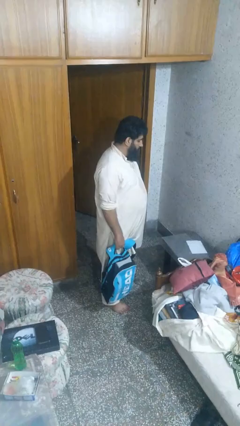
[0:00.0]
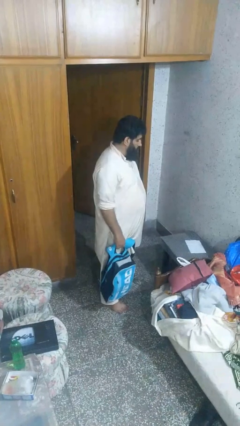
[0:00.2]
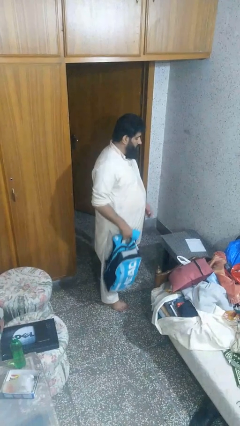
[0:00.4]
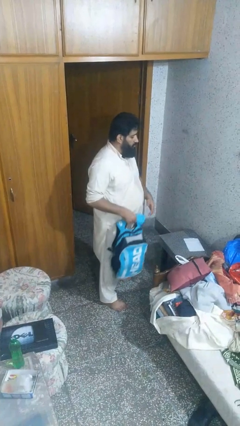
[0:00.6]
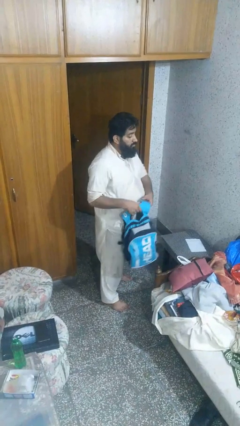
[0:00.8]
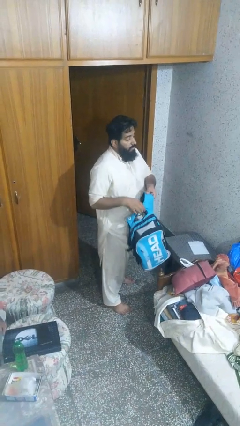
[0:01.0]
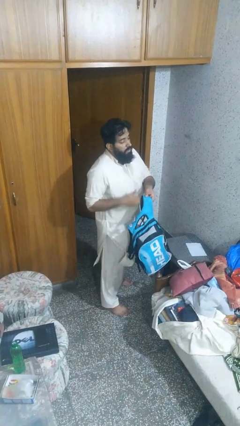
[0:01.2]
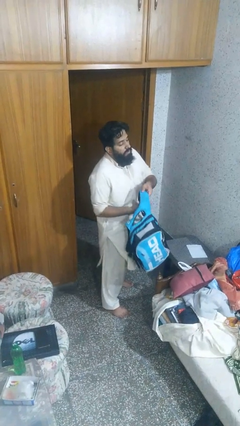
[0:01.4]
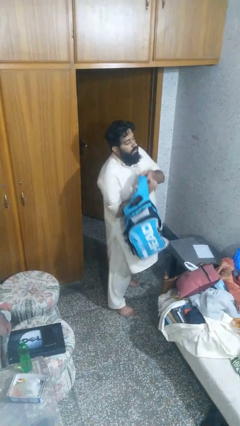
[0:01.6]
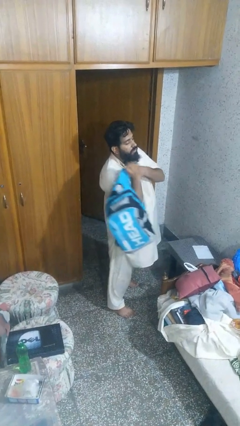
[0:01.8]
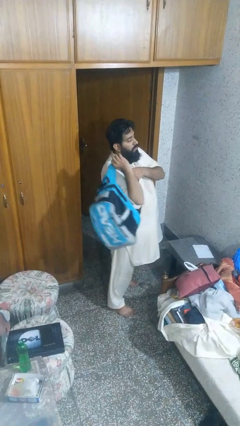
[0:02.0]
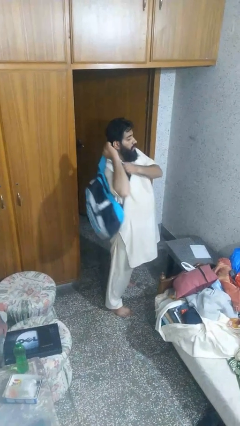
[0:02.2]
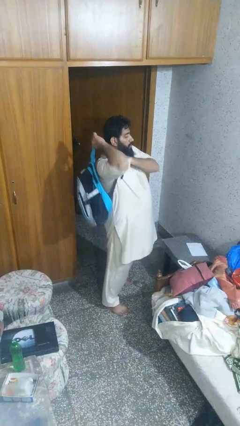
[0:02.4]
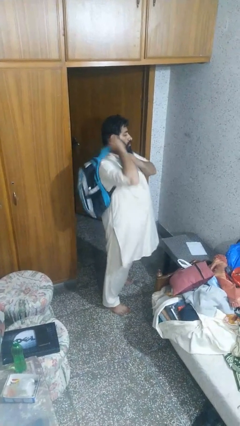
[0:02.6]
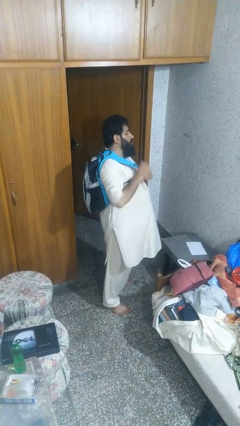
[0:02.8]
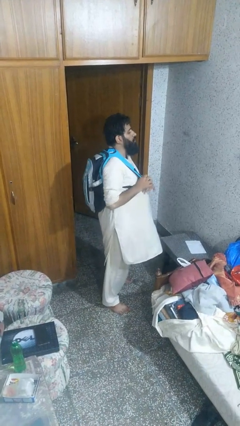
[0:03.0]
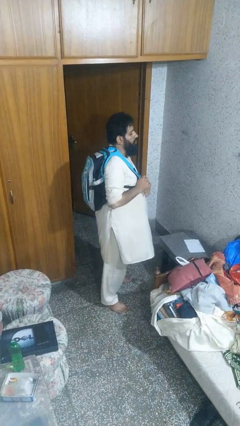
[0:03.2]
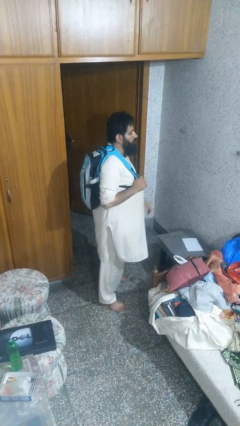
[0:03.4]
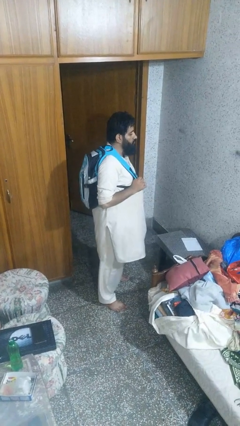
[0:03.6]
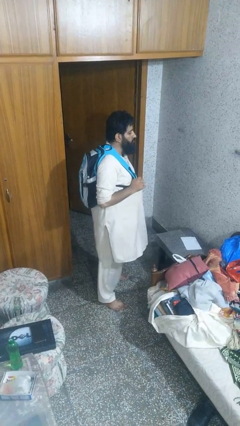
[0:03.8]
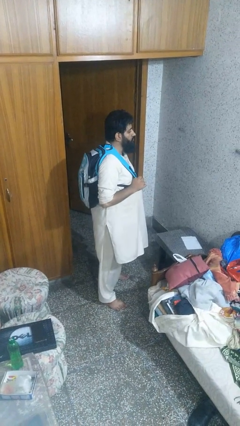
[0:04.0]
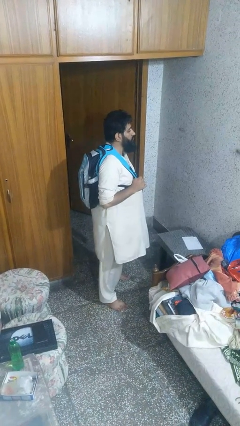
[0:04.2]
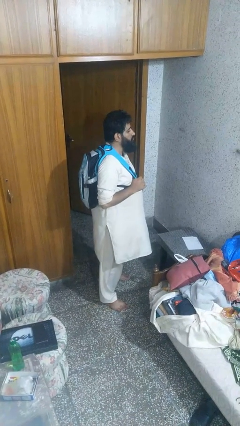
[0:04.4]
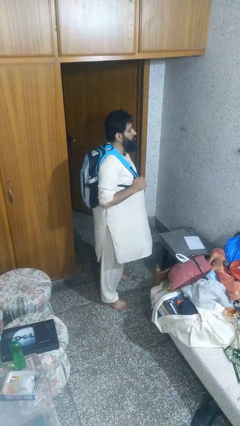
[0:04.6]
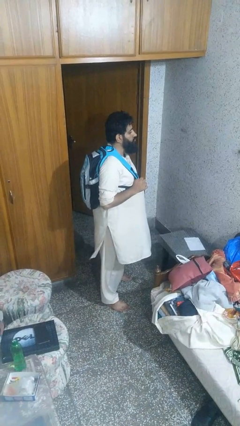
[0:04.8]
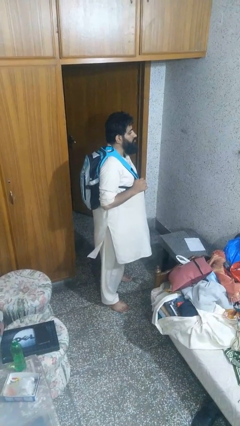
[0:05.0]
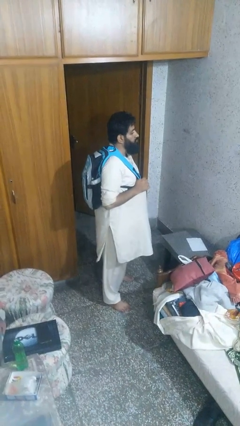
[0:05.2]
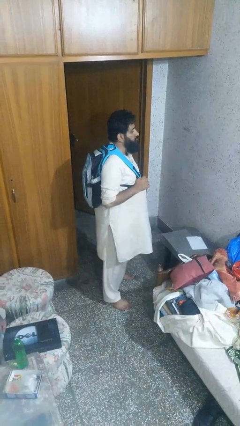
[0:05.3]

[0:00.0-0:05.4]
person puts on backpack

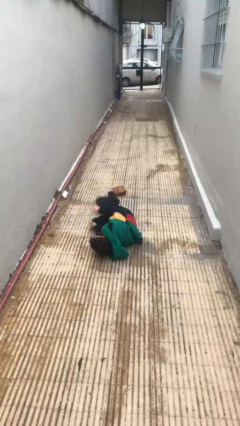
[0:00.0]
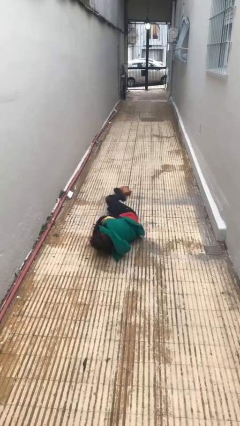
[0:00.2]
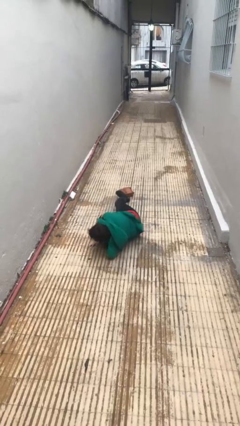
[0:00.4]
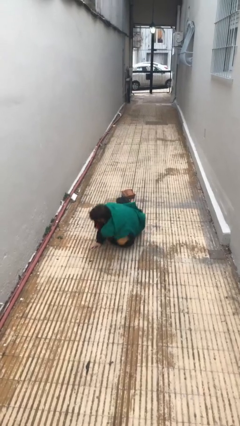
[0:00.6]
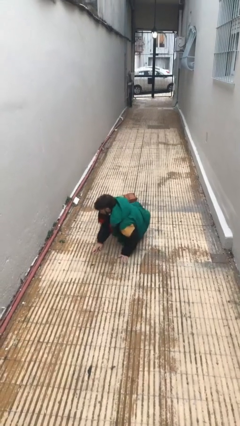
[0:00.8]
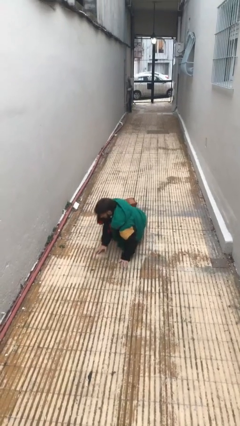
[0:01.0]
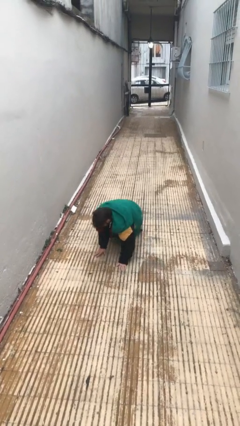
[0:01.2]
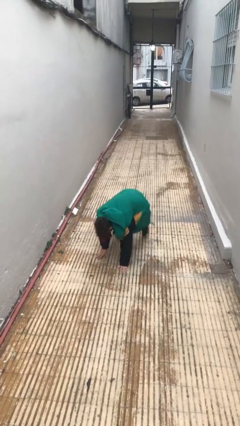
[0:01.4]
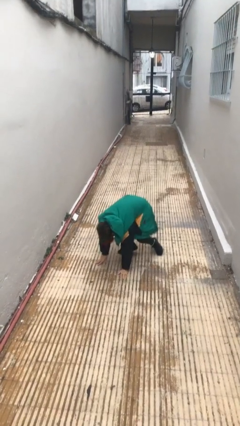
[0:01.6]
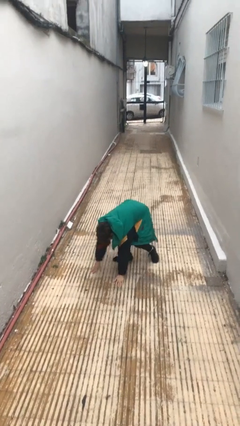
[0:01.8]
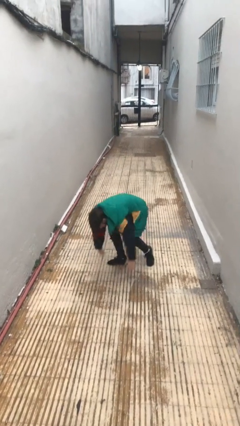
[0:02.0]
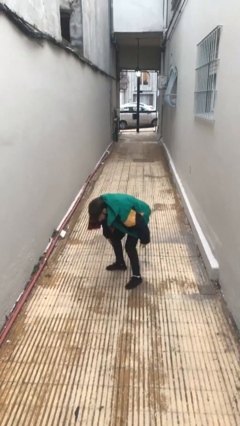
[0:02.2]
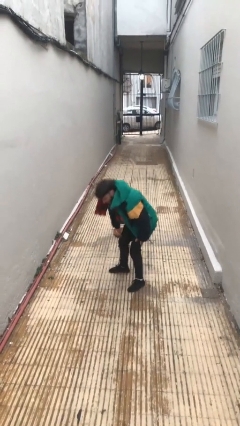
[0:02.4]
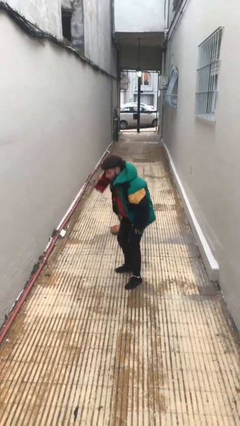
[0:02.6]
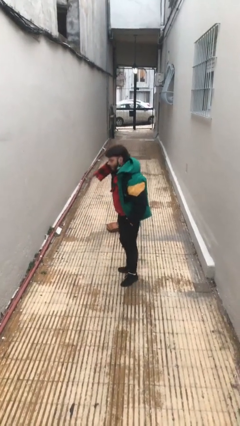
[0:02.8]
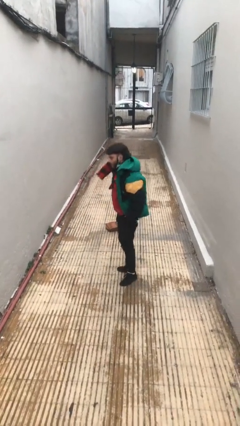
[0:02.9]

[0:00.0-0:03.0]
person stands up from floor

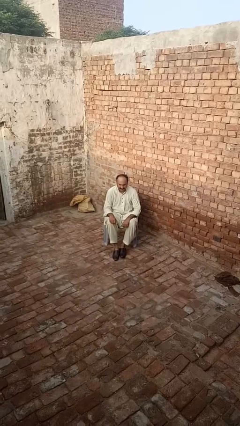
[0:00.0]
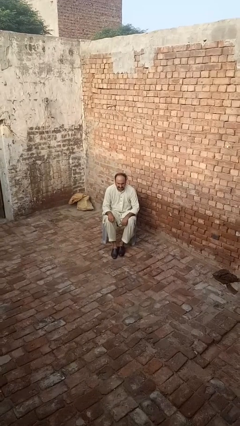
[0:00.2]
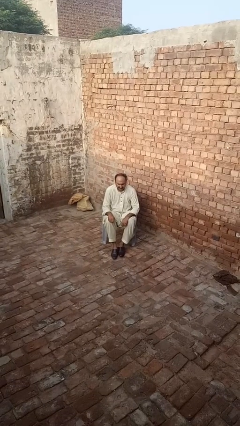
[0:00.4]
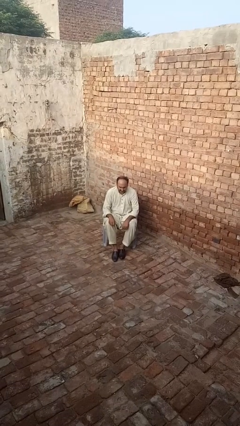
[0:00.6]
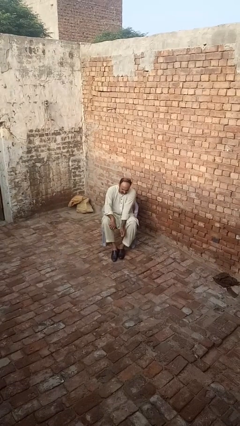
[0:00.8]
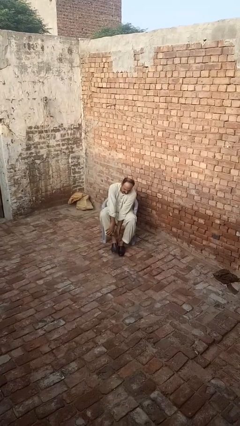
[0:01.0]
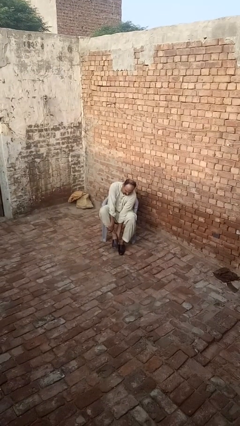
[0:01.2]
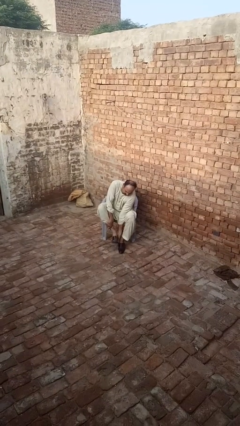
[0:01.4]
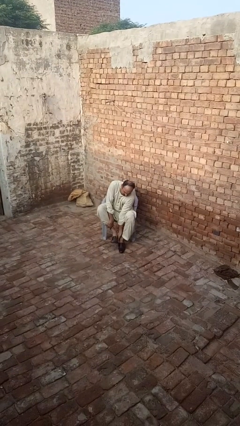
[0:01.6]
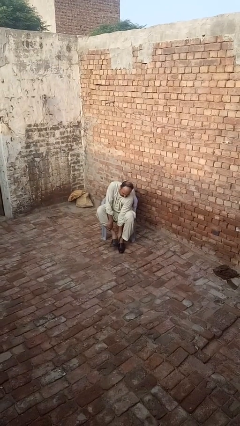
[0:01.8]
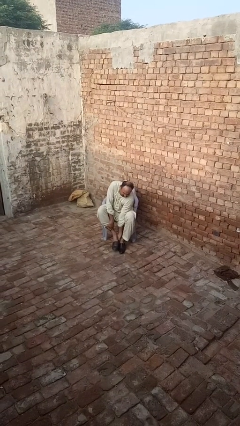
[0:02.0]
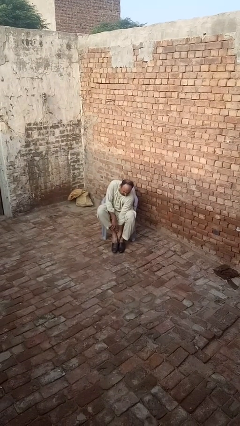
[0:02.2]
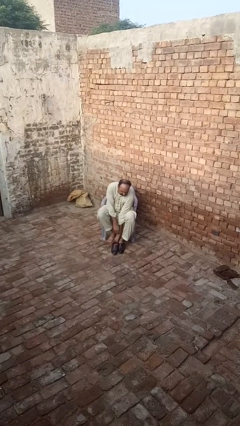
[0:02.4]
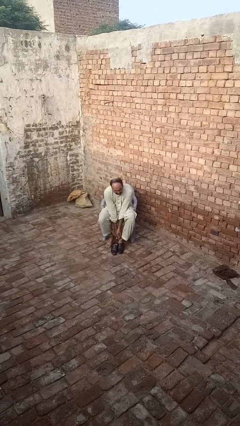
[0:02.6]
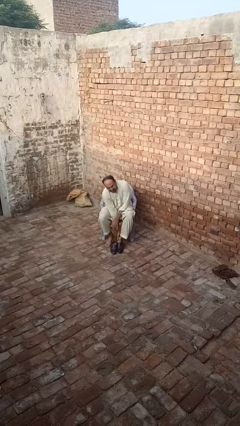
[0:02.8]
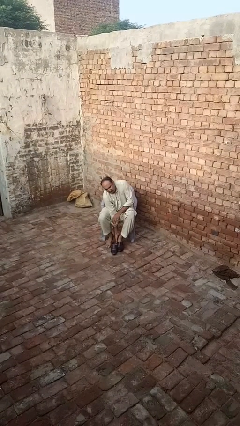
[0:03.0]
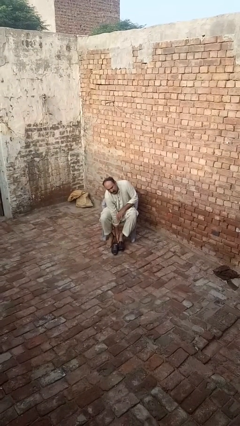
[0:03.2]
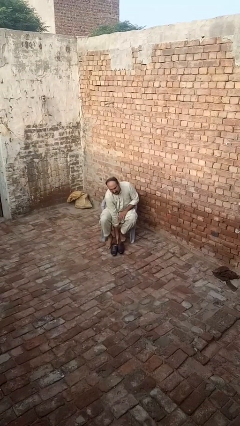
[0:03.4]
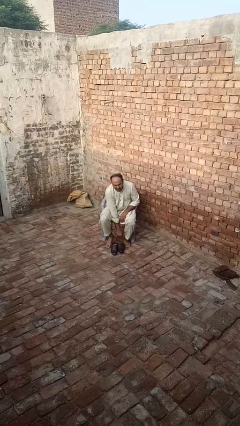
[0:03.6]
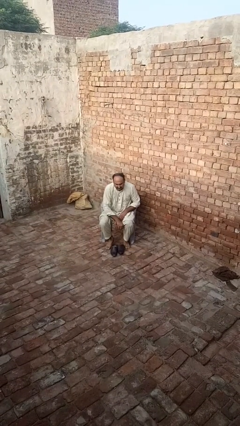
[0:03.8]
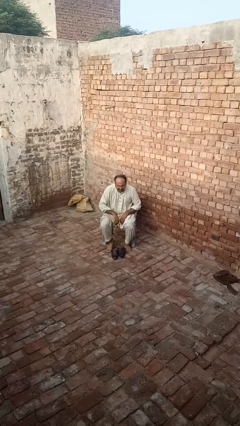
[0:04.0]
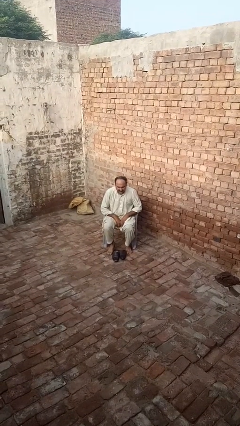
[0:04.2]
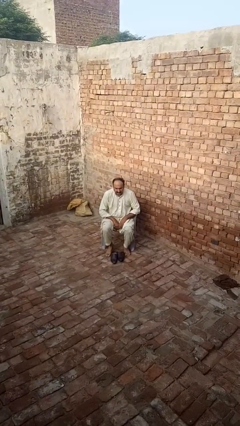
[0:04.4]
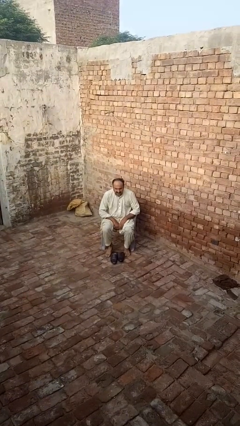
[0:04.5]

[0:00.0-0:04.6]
person takes off shoes

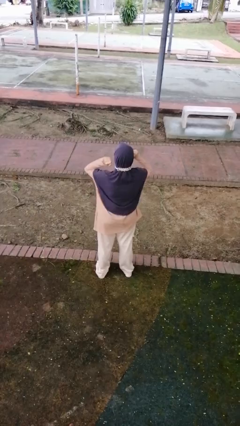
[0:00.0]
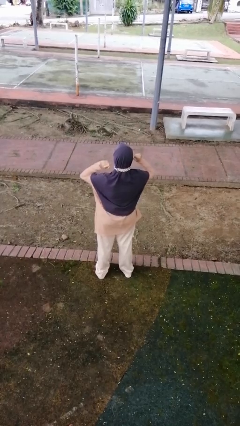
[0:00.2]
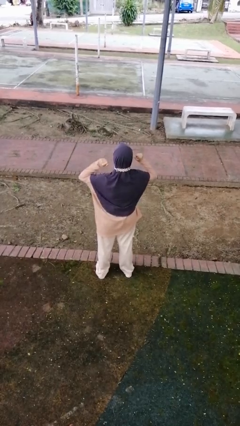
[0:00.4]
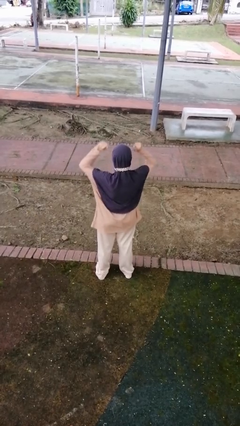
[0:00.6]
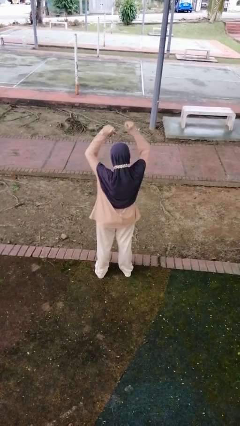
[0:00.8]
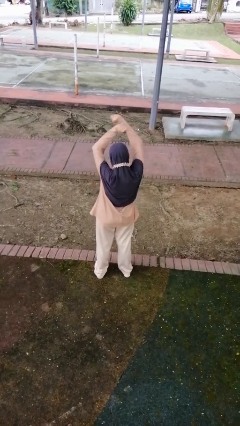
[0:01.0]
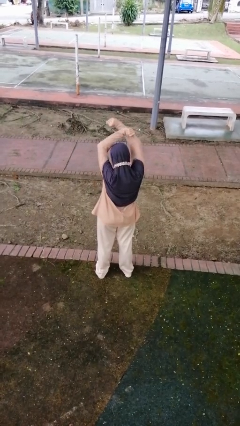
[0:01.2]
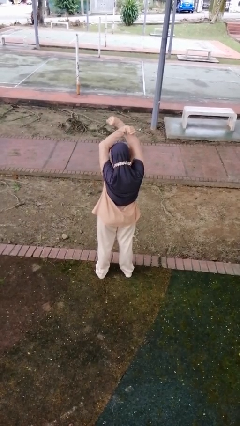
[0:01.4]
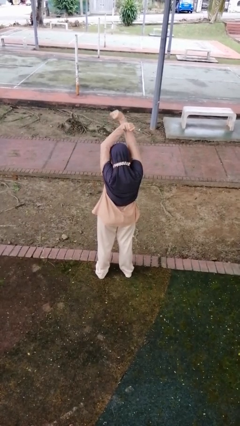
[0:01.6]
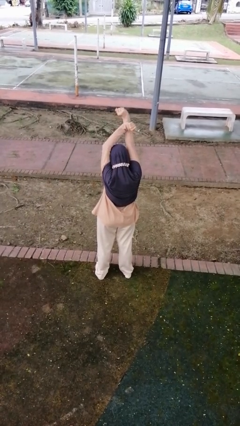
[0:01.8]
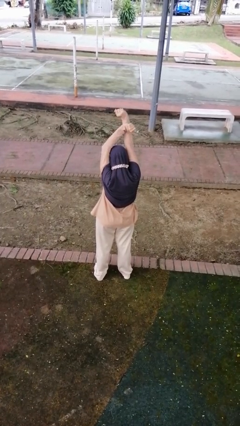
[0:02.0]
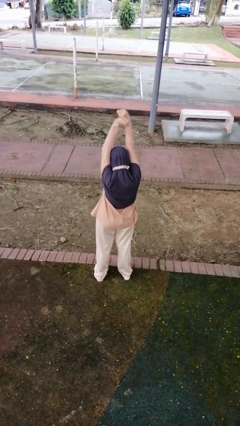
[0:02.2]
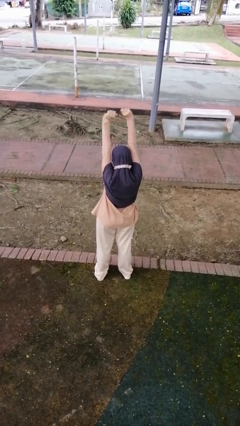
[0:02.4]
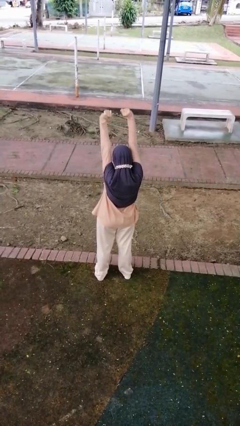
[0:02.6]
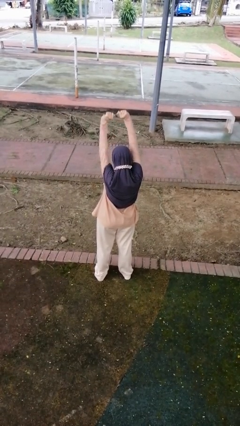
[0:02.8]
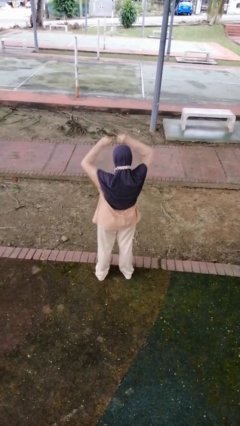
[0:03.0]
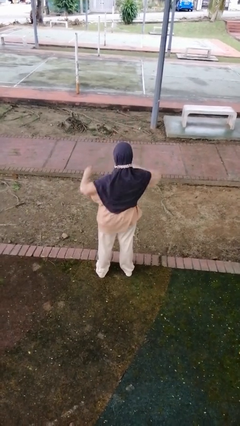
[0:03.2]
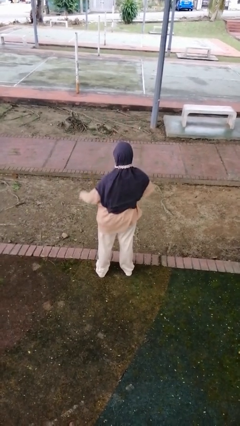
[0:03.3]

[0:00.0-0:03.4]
person stretches arms over head

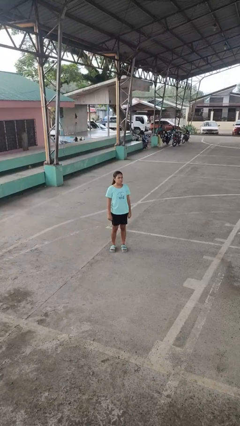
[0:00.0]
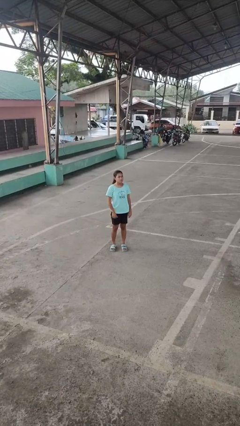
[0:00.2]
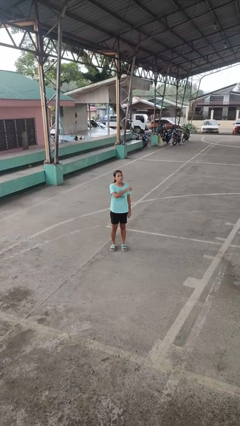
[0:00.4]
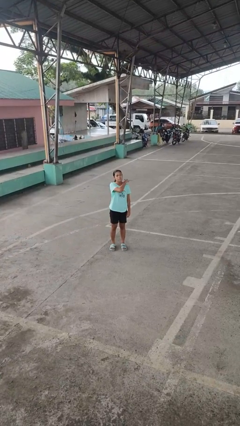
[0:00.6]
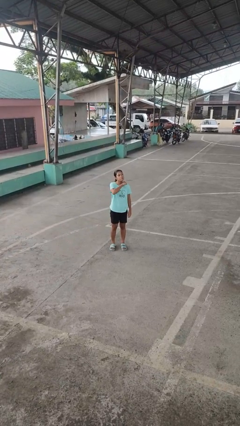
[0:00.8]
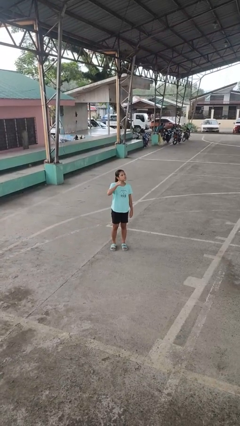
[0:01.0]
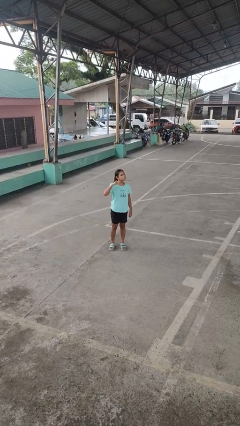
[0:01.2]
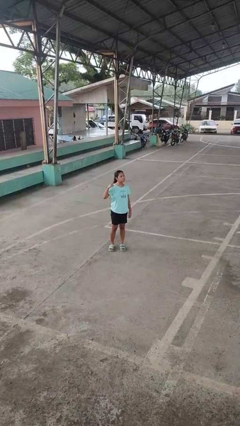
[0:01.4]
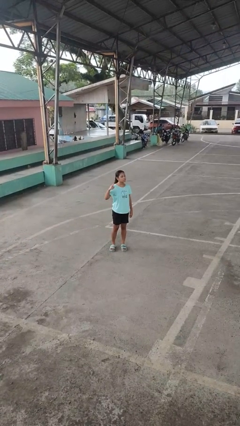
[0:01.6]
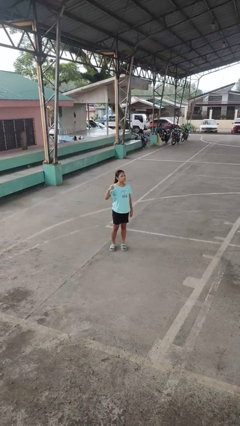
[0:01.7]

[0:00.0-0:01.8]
person gestures cut
